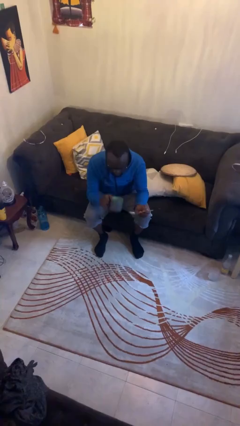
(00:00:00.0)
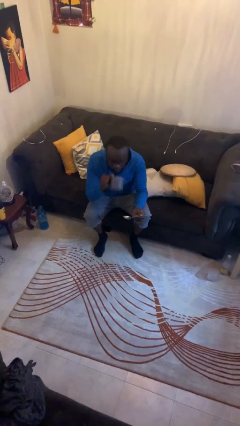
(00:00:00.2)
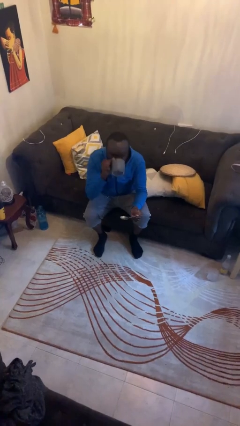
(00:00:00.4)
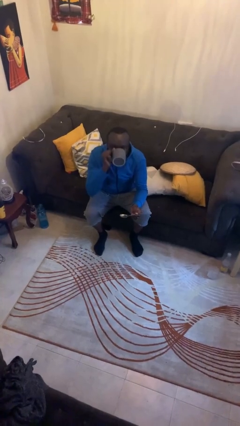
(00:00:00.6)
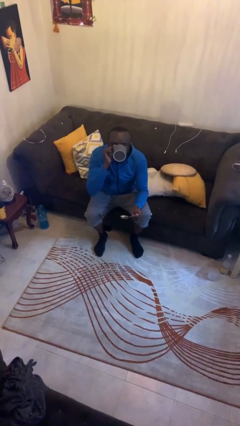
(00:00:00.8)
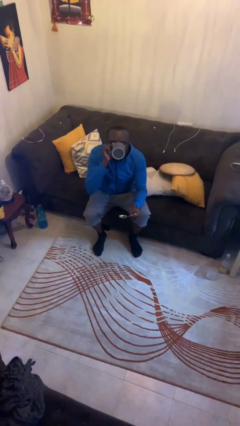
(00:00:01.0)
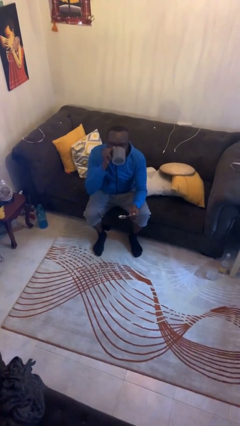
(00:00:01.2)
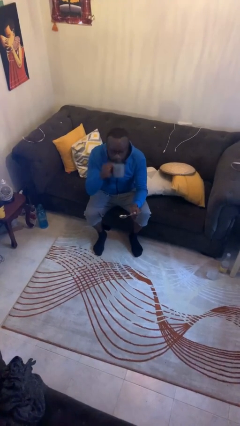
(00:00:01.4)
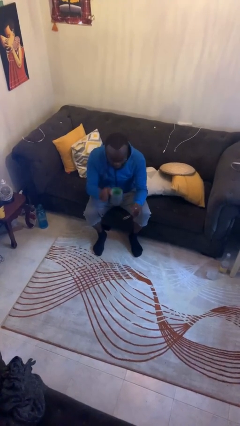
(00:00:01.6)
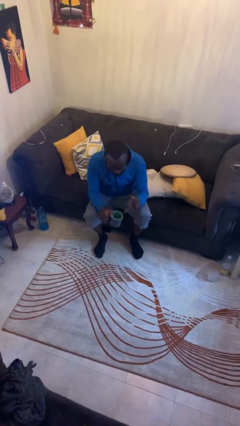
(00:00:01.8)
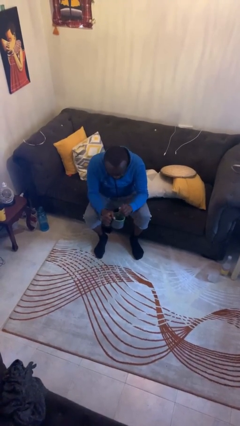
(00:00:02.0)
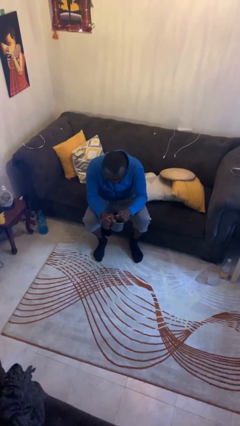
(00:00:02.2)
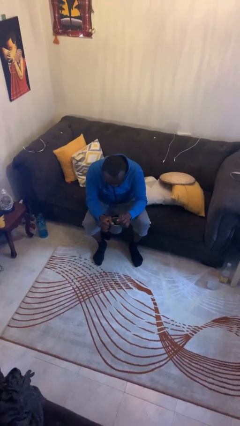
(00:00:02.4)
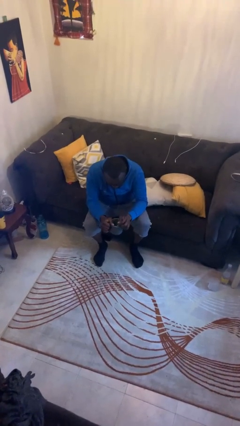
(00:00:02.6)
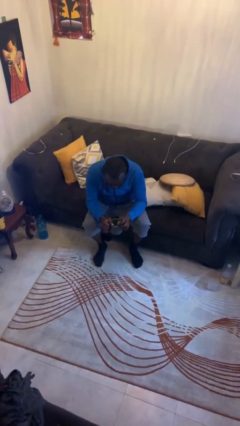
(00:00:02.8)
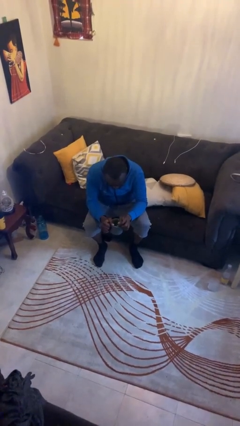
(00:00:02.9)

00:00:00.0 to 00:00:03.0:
person drinks from mug

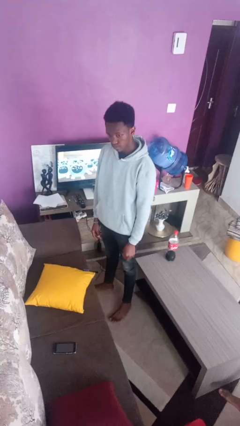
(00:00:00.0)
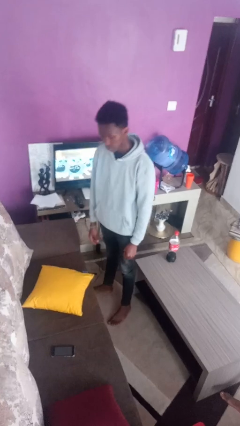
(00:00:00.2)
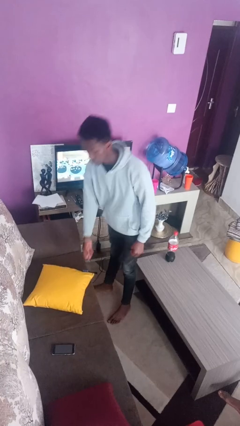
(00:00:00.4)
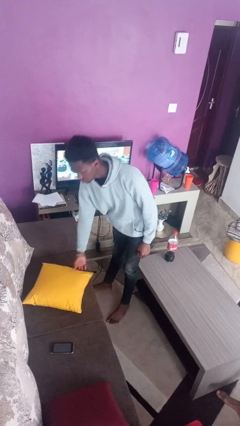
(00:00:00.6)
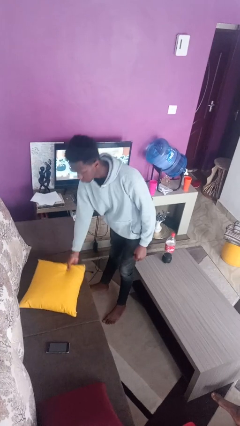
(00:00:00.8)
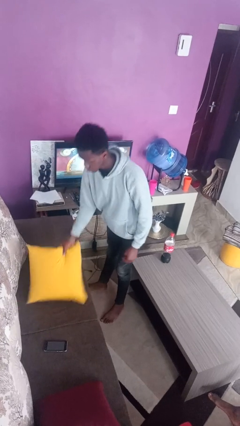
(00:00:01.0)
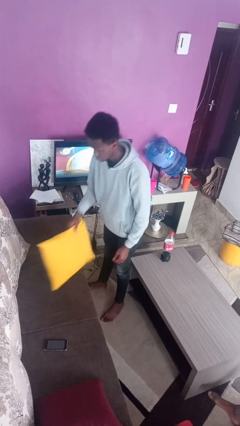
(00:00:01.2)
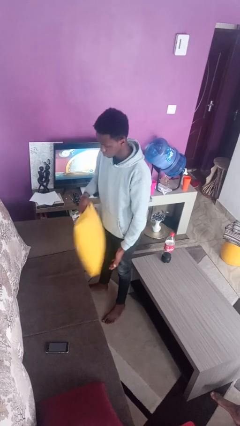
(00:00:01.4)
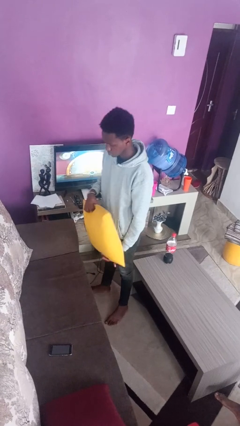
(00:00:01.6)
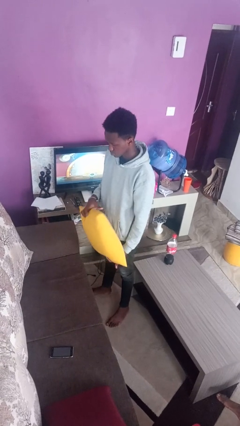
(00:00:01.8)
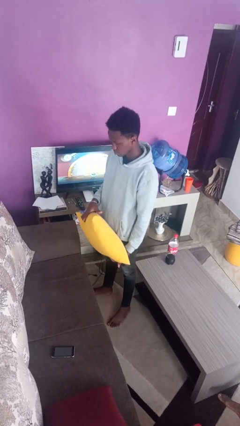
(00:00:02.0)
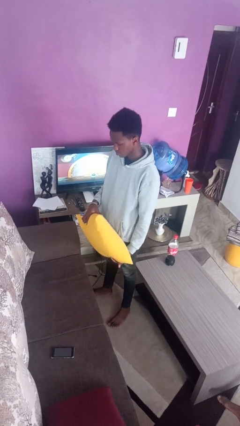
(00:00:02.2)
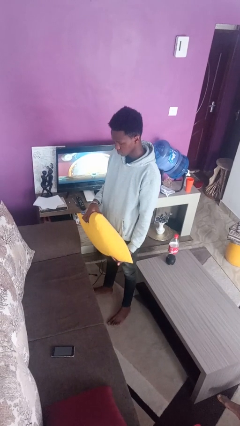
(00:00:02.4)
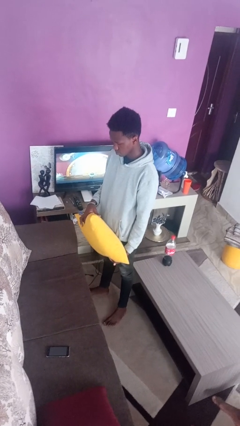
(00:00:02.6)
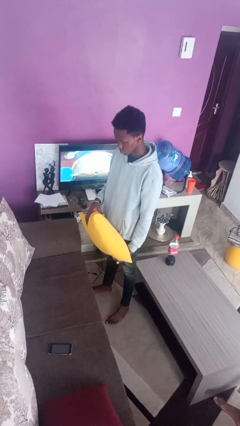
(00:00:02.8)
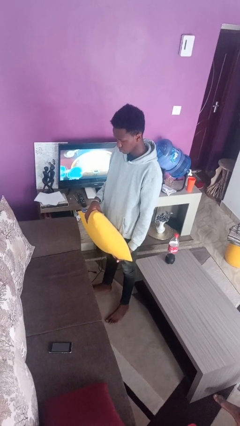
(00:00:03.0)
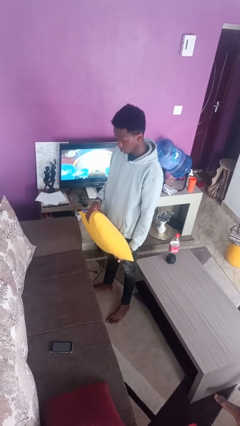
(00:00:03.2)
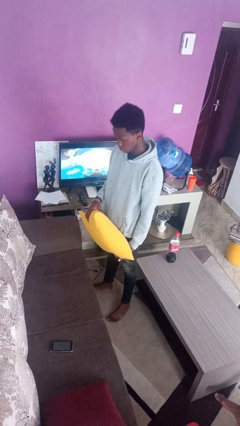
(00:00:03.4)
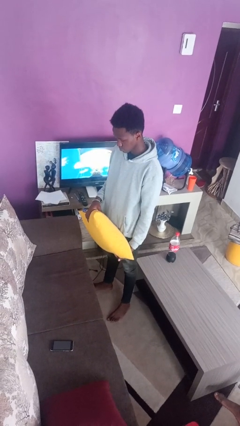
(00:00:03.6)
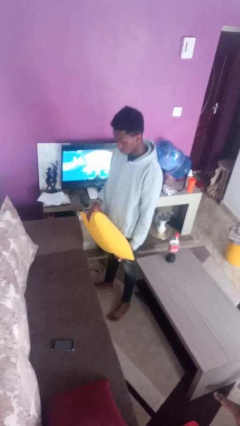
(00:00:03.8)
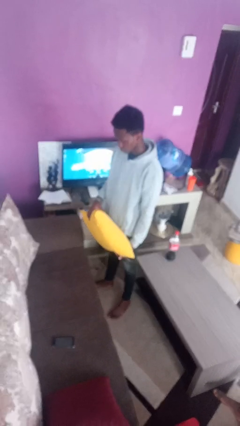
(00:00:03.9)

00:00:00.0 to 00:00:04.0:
person picks up object from couch

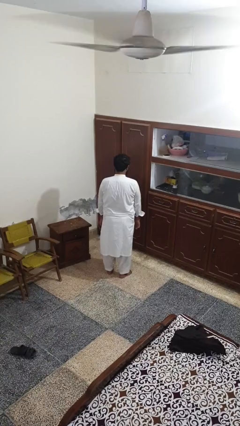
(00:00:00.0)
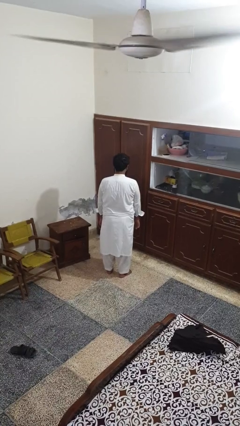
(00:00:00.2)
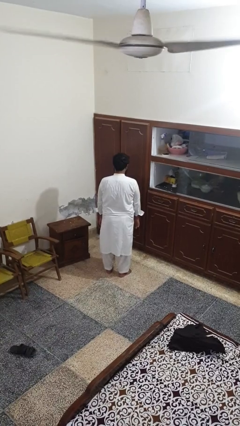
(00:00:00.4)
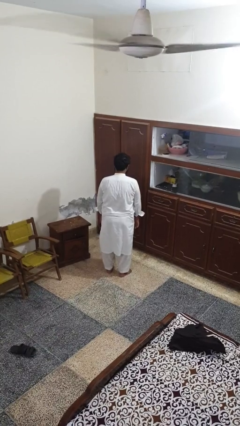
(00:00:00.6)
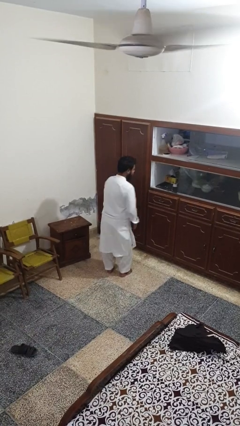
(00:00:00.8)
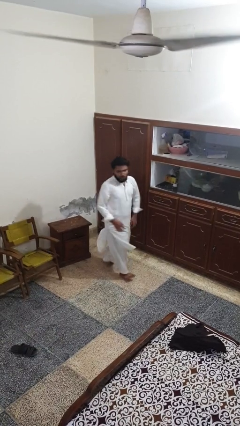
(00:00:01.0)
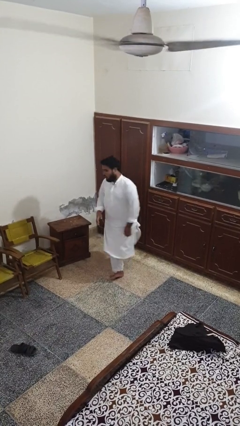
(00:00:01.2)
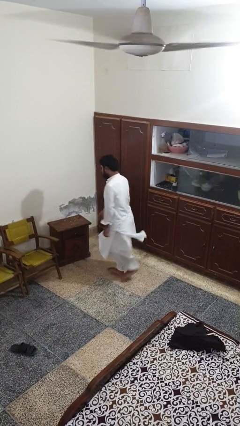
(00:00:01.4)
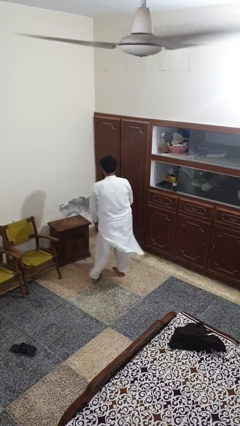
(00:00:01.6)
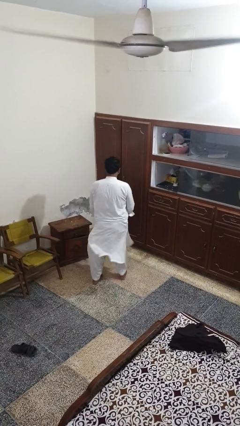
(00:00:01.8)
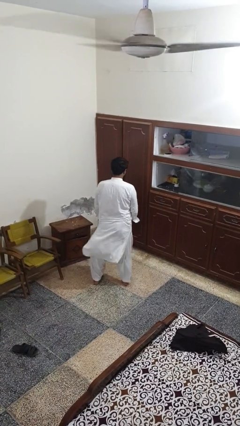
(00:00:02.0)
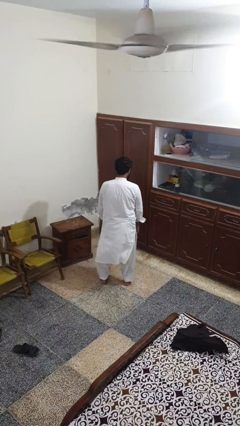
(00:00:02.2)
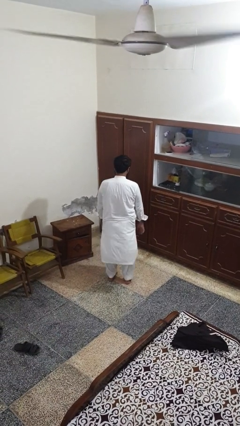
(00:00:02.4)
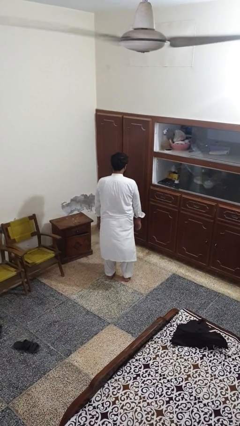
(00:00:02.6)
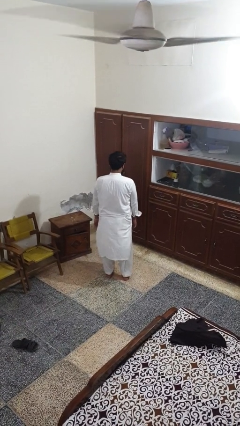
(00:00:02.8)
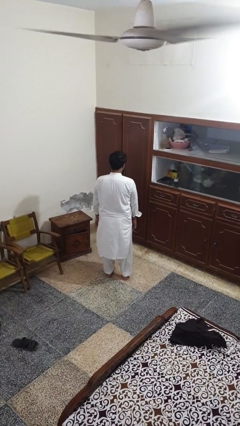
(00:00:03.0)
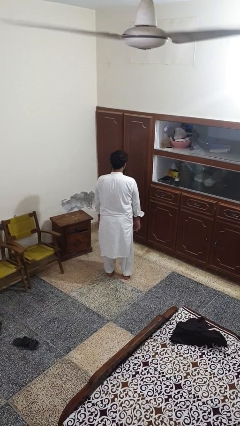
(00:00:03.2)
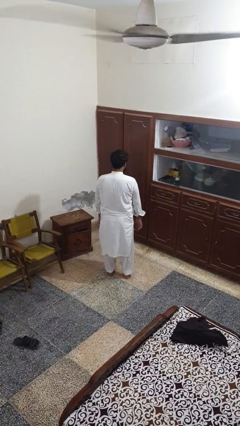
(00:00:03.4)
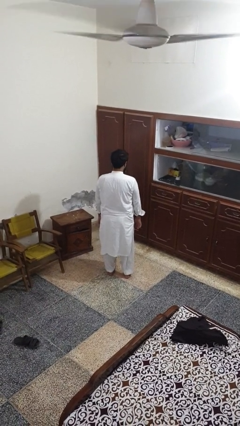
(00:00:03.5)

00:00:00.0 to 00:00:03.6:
person twirls

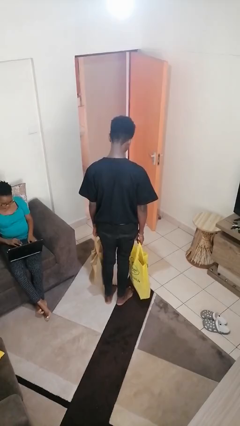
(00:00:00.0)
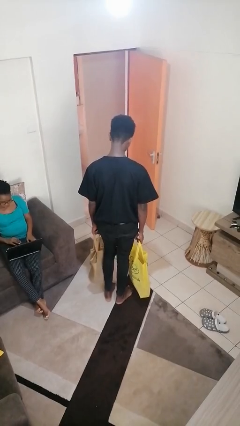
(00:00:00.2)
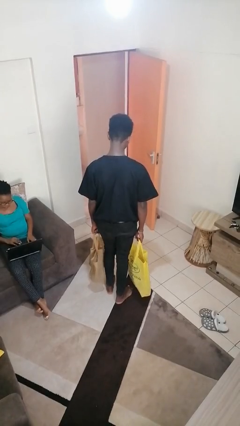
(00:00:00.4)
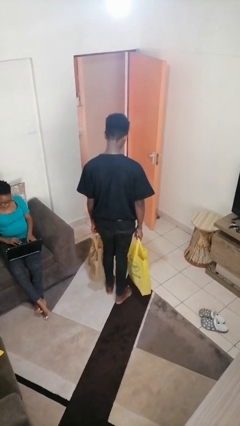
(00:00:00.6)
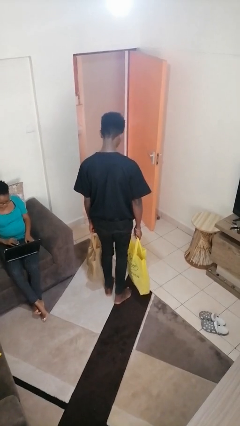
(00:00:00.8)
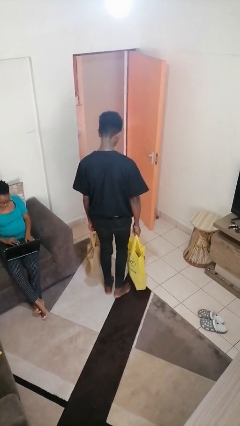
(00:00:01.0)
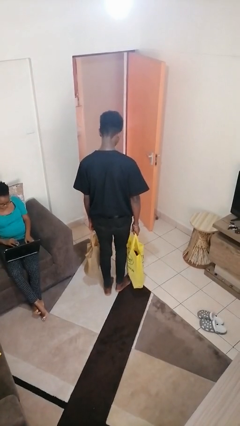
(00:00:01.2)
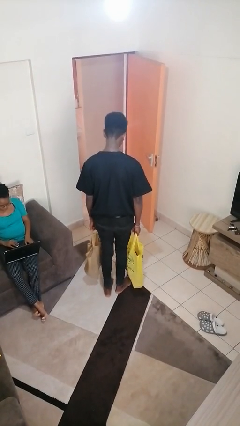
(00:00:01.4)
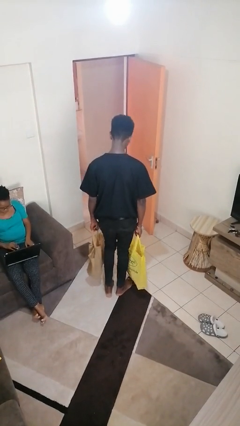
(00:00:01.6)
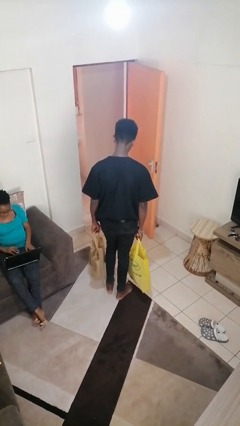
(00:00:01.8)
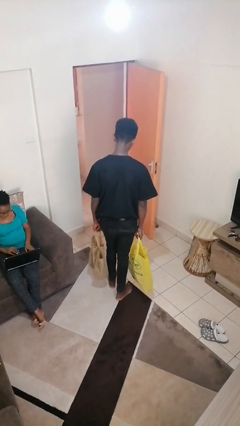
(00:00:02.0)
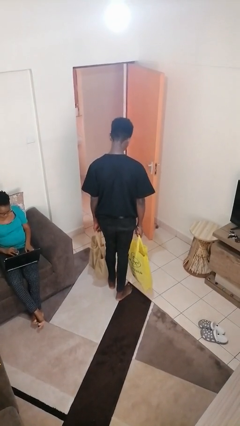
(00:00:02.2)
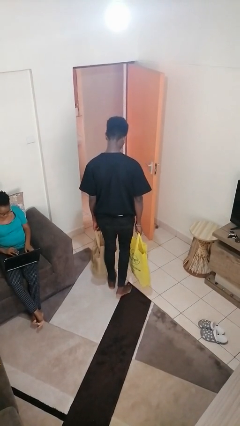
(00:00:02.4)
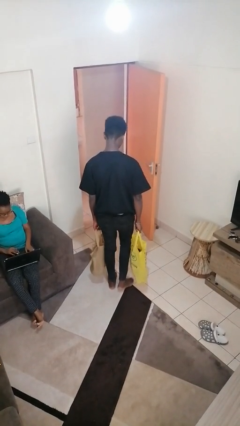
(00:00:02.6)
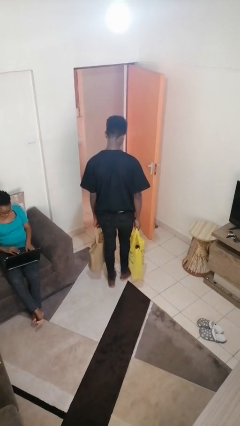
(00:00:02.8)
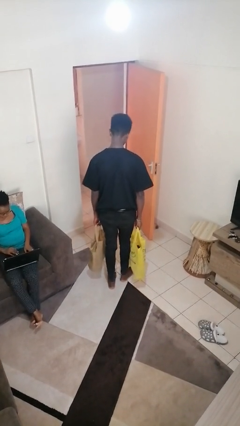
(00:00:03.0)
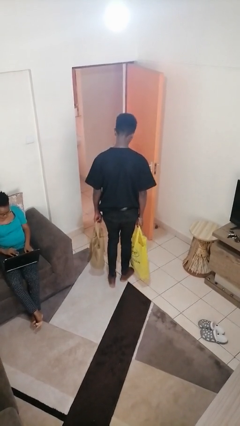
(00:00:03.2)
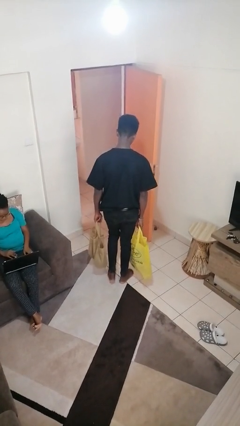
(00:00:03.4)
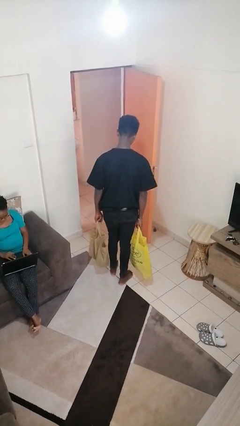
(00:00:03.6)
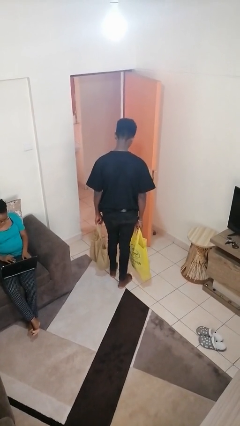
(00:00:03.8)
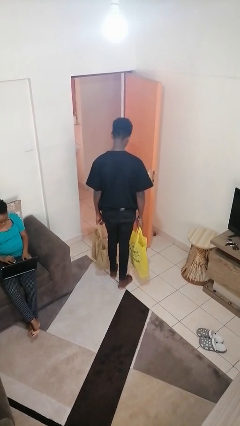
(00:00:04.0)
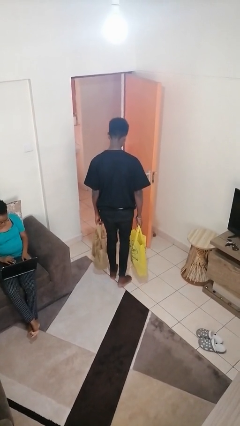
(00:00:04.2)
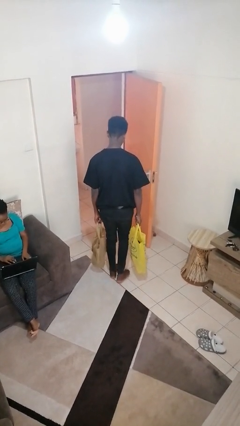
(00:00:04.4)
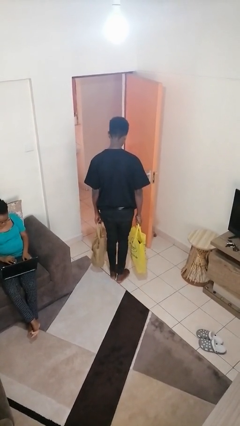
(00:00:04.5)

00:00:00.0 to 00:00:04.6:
person carries groceries

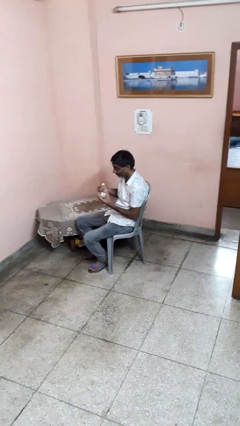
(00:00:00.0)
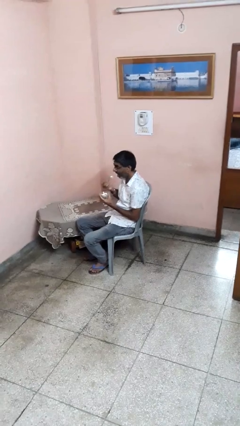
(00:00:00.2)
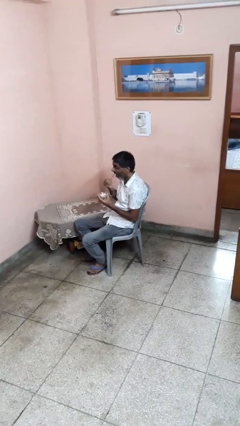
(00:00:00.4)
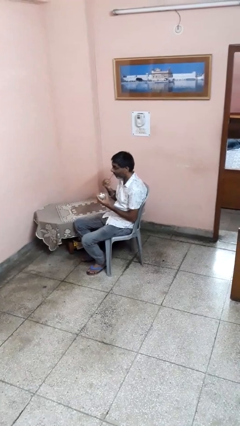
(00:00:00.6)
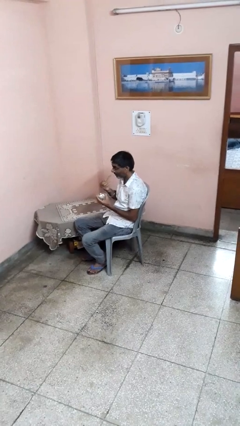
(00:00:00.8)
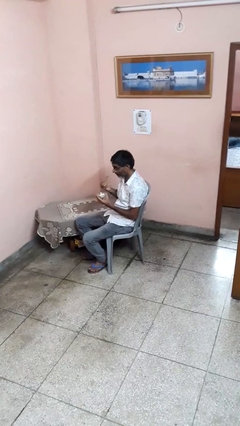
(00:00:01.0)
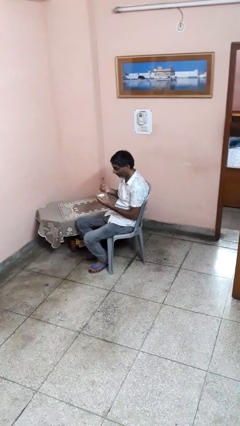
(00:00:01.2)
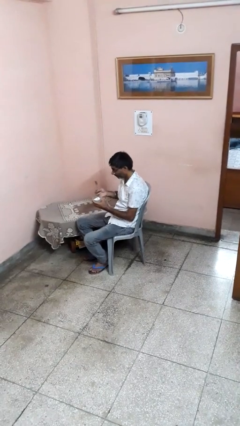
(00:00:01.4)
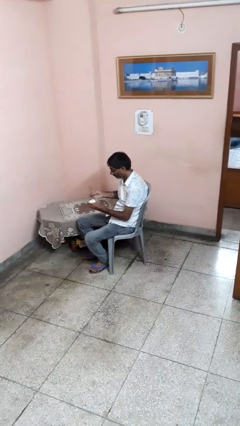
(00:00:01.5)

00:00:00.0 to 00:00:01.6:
person eats with utensil

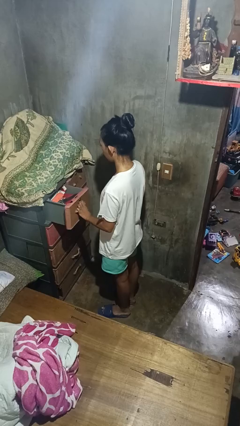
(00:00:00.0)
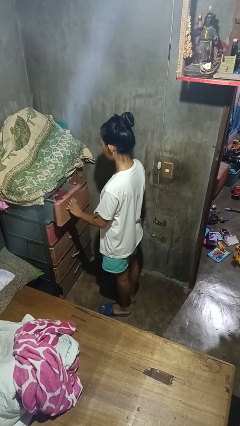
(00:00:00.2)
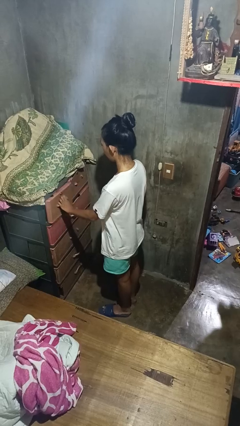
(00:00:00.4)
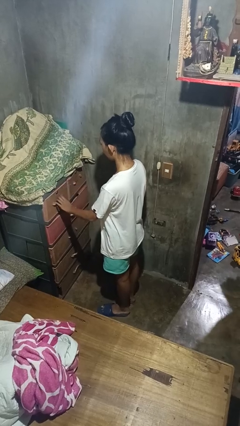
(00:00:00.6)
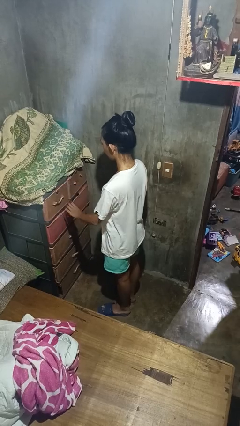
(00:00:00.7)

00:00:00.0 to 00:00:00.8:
person closes dresser drawer
